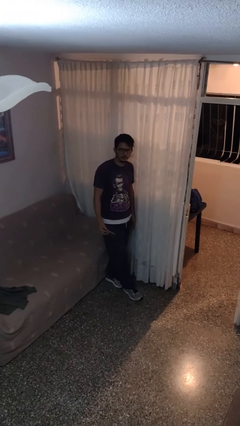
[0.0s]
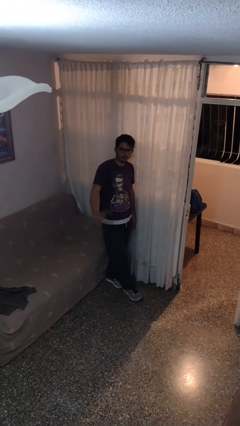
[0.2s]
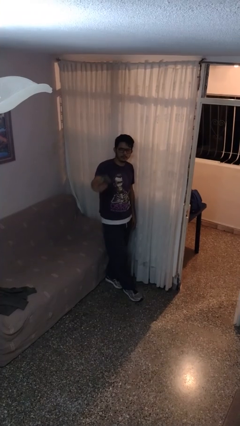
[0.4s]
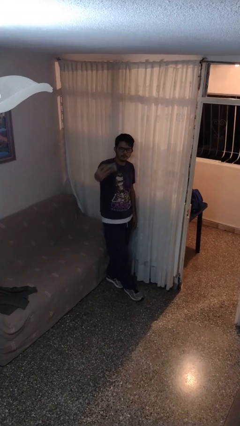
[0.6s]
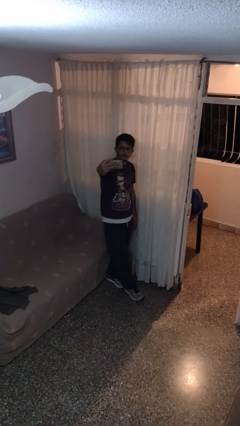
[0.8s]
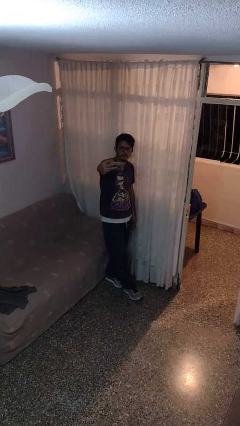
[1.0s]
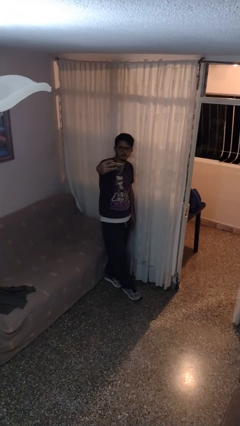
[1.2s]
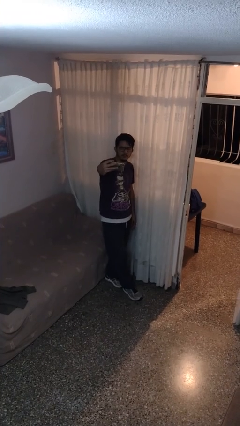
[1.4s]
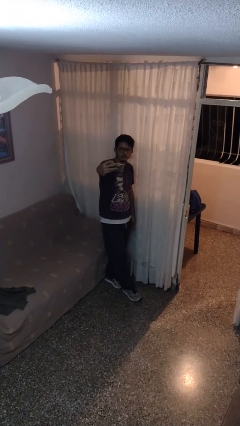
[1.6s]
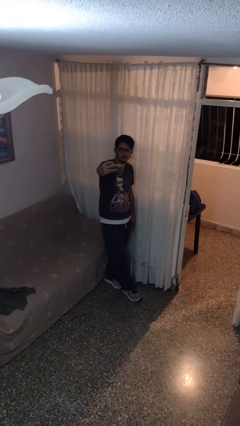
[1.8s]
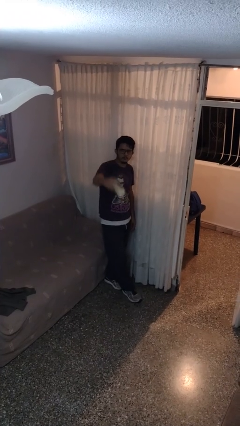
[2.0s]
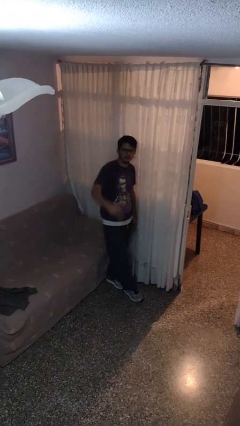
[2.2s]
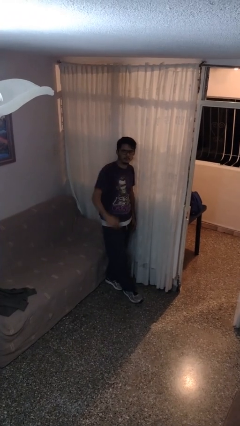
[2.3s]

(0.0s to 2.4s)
person takes selfie

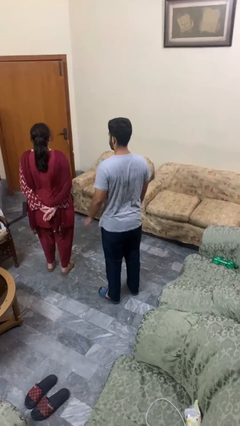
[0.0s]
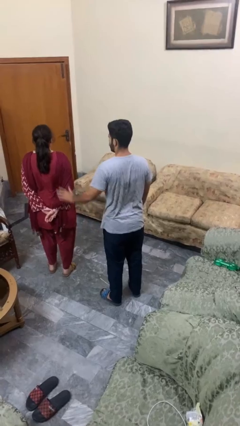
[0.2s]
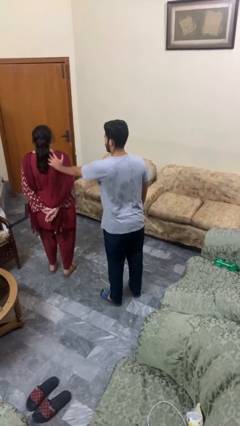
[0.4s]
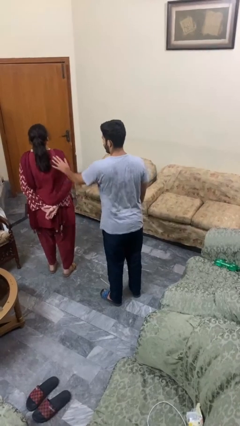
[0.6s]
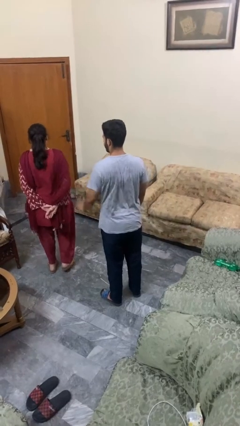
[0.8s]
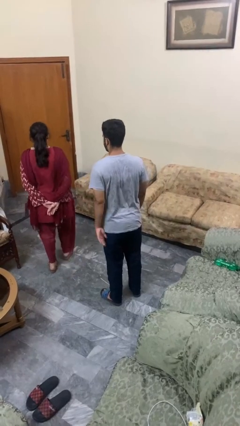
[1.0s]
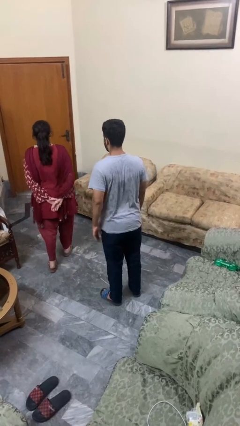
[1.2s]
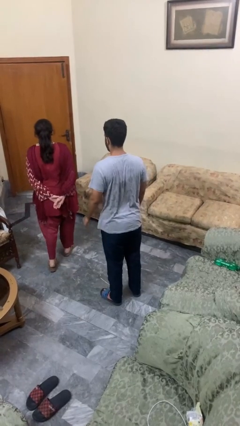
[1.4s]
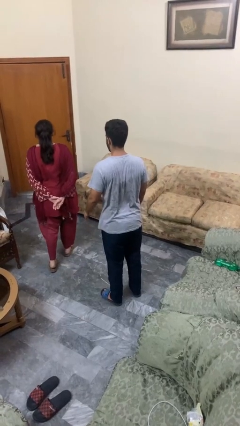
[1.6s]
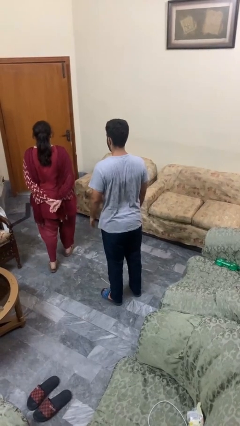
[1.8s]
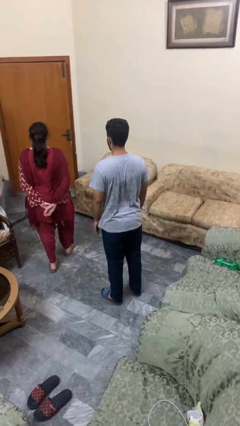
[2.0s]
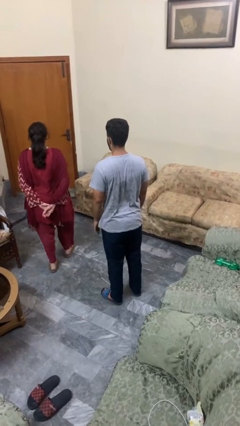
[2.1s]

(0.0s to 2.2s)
person shoves person

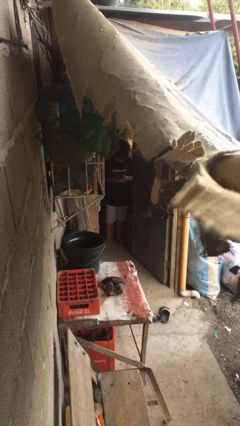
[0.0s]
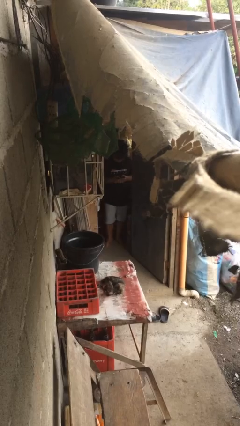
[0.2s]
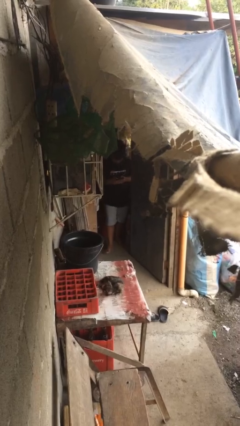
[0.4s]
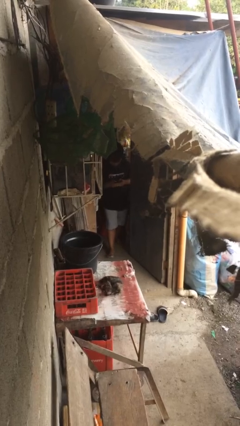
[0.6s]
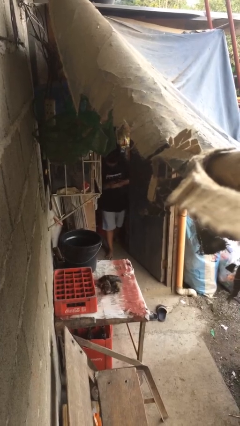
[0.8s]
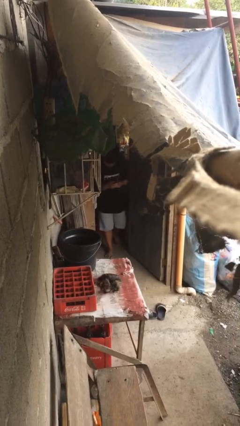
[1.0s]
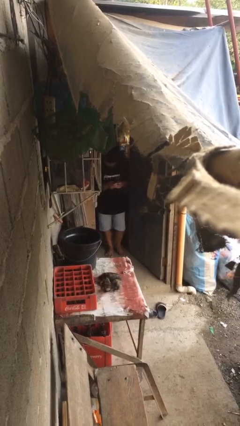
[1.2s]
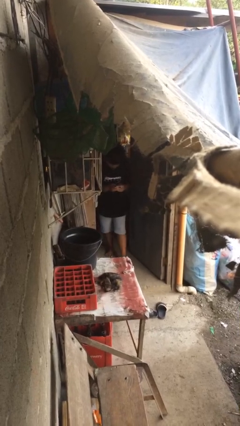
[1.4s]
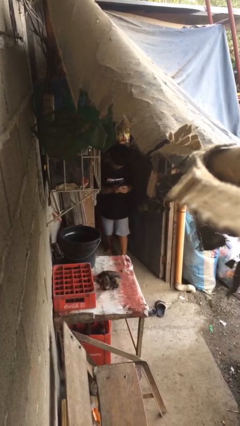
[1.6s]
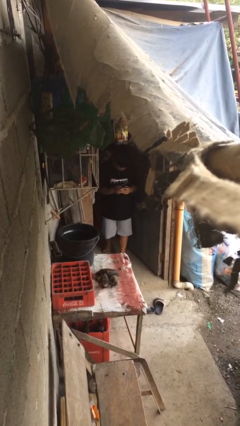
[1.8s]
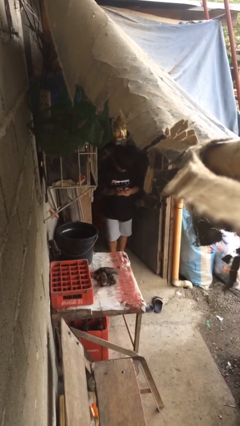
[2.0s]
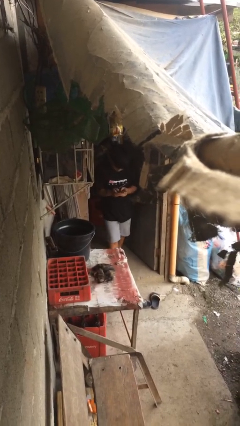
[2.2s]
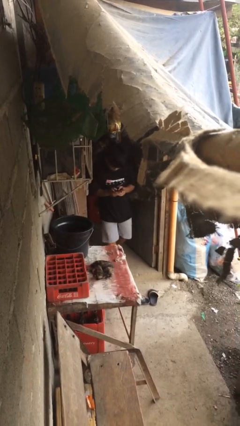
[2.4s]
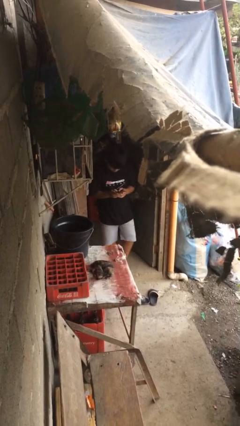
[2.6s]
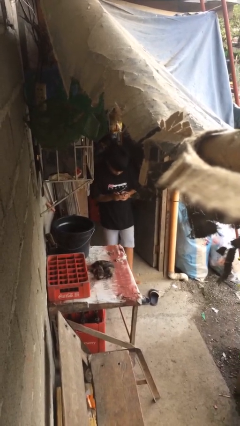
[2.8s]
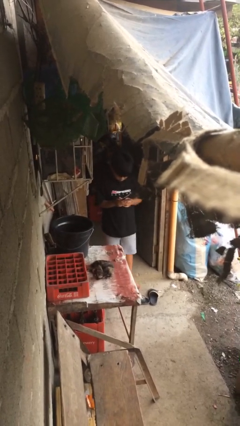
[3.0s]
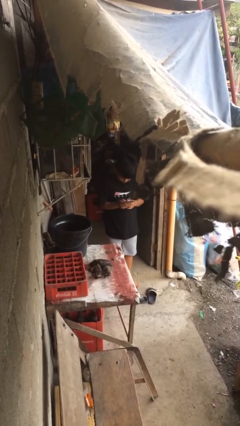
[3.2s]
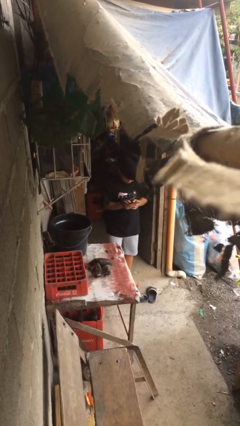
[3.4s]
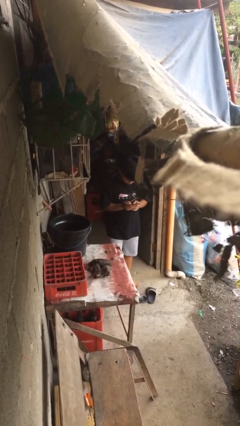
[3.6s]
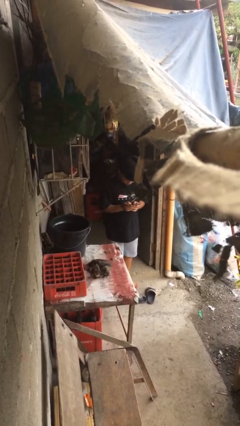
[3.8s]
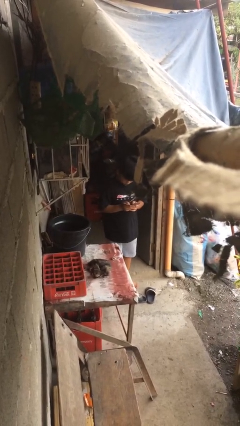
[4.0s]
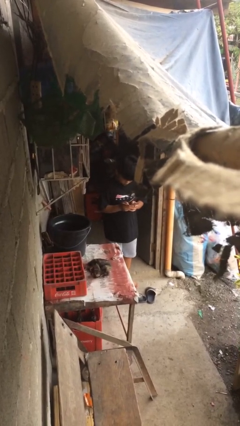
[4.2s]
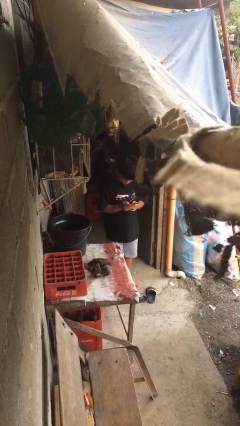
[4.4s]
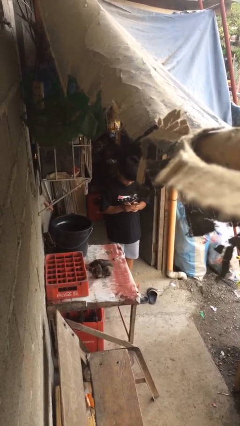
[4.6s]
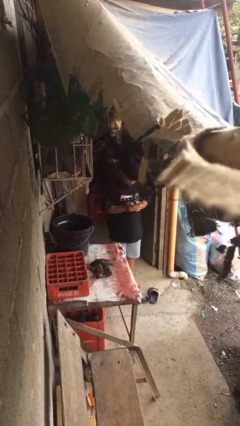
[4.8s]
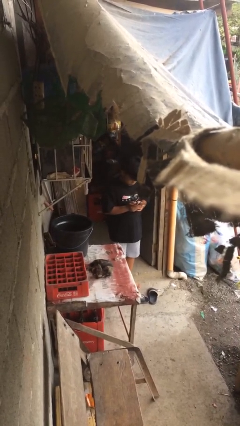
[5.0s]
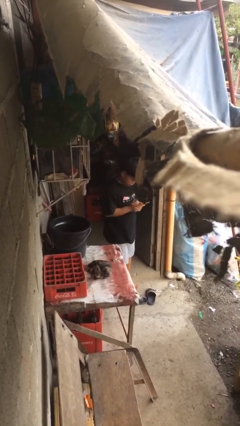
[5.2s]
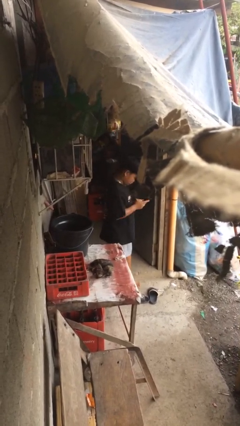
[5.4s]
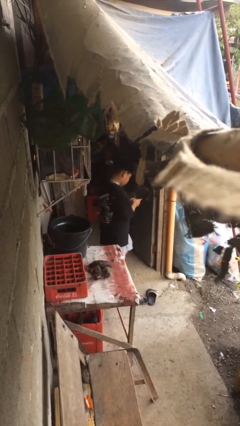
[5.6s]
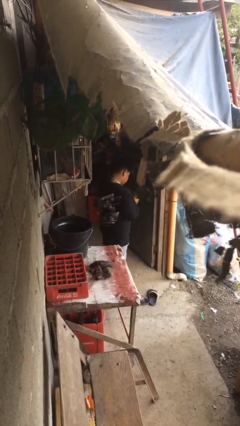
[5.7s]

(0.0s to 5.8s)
person enters scene through structure

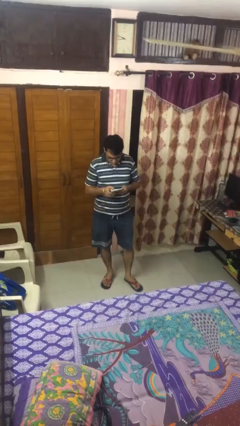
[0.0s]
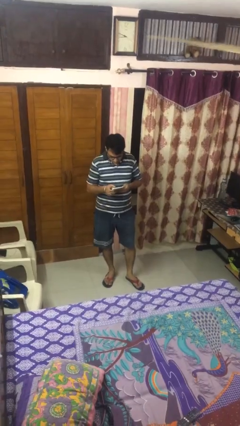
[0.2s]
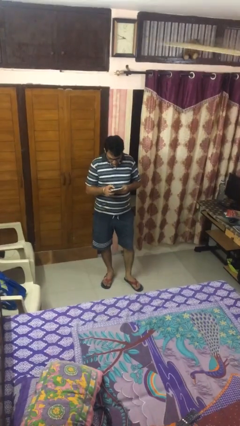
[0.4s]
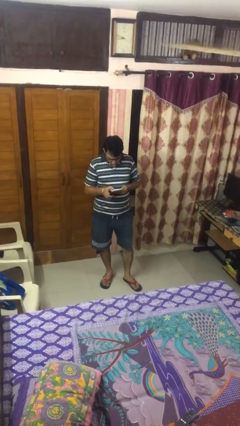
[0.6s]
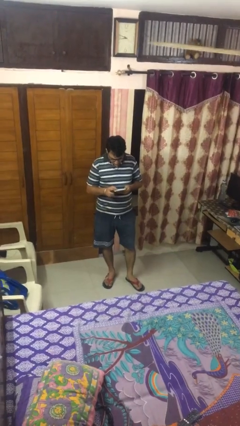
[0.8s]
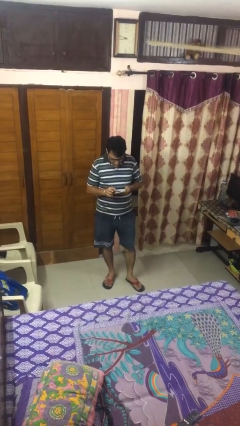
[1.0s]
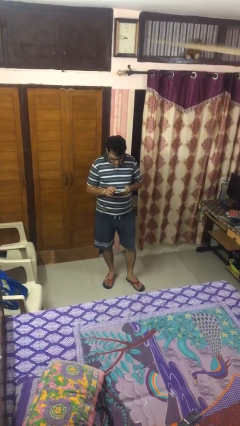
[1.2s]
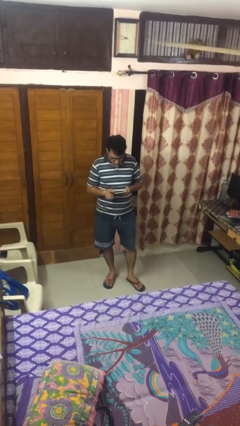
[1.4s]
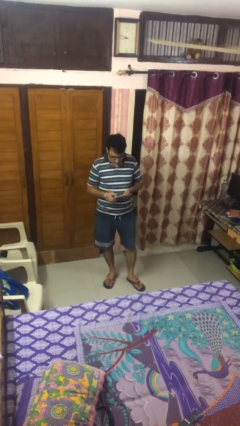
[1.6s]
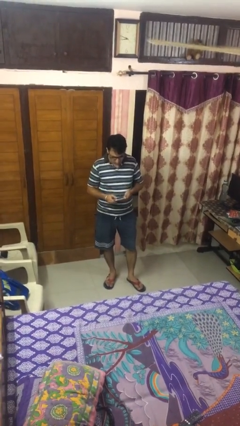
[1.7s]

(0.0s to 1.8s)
person interacts with tablet

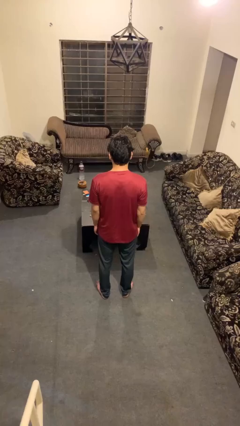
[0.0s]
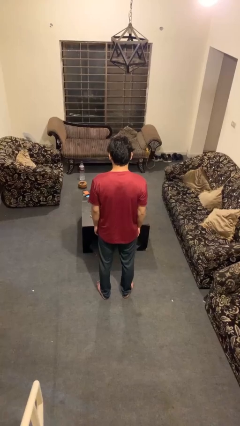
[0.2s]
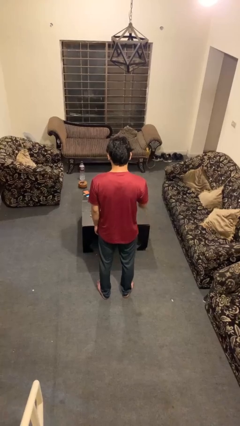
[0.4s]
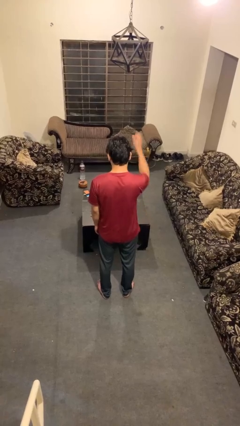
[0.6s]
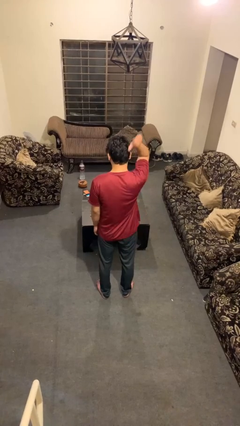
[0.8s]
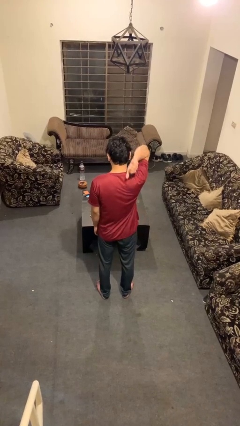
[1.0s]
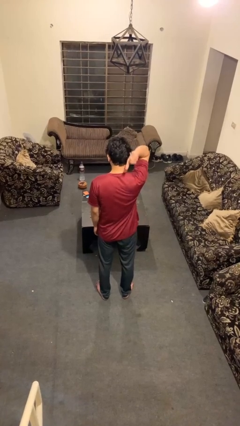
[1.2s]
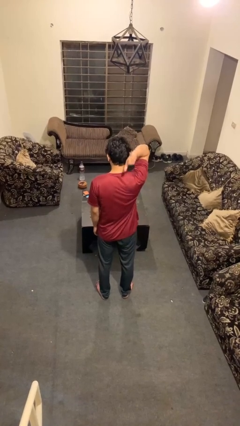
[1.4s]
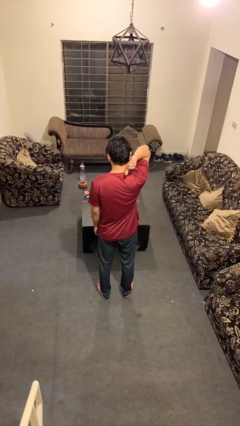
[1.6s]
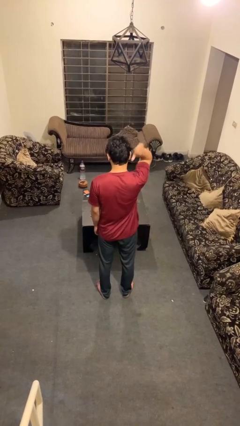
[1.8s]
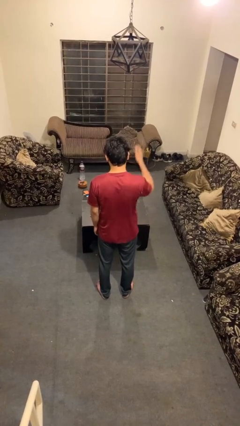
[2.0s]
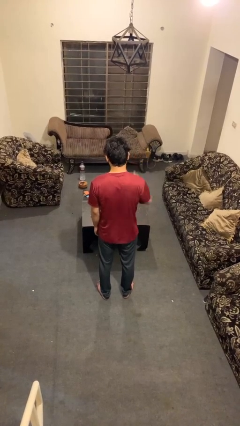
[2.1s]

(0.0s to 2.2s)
person gestures behind me

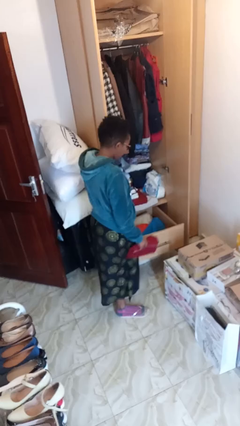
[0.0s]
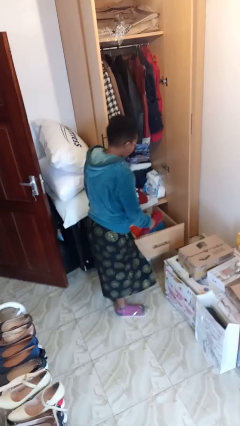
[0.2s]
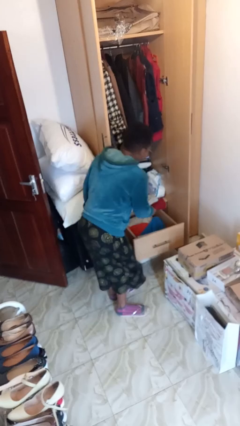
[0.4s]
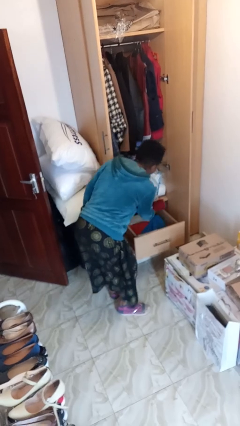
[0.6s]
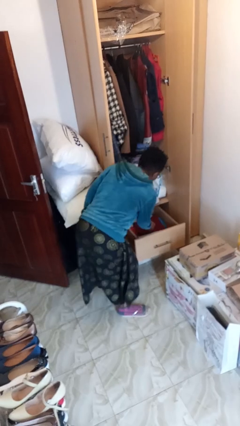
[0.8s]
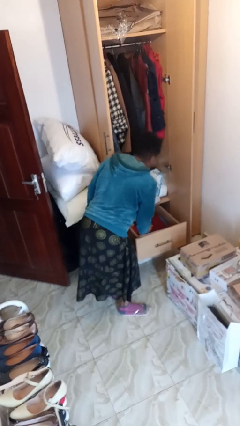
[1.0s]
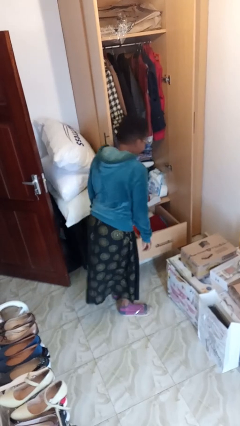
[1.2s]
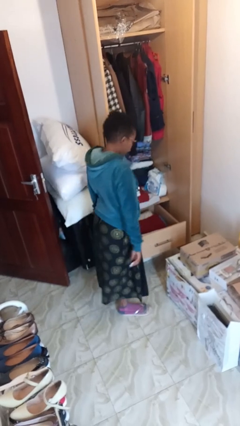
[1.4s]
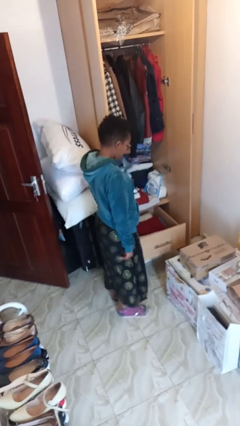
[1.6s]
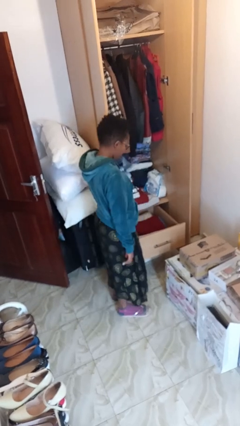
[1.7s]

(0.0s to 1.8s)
person puts clothes into dresser

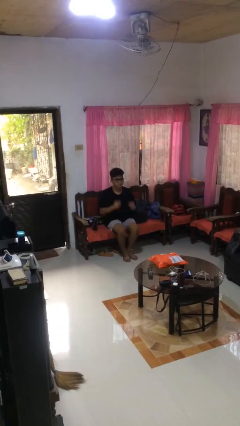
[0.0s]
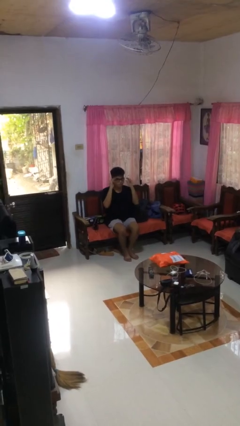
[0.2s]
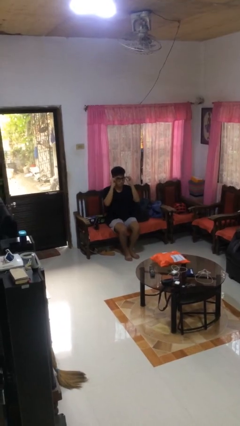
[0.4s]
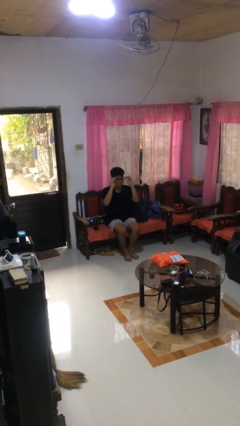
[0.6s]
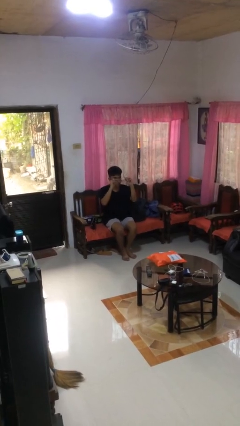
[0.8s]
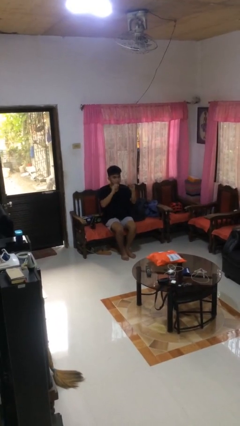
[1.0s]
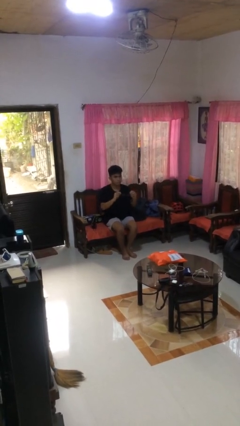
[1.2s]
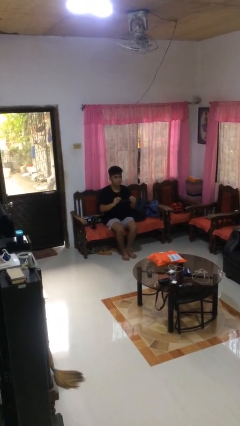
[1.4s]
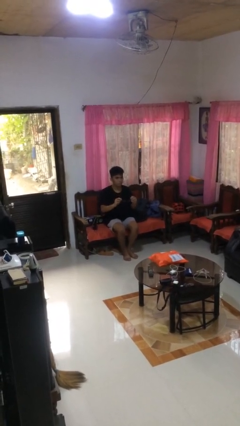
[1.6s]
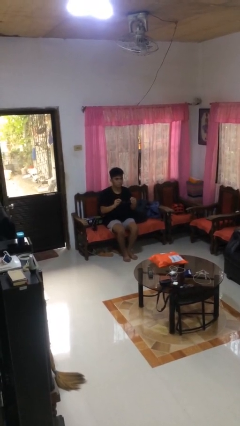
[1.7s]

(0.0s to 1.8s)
person takes off glasses
